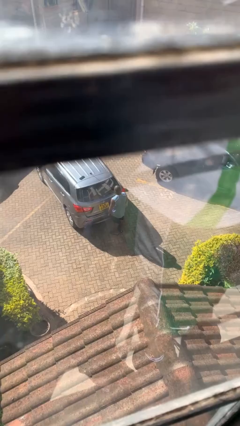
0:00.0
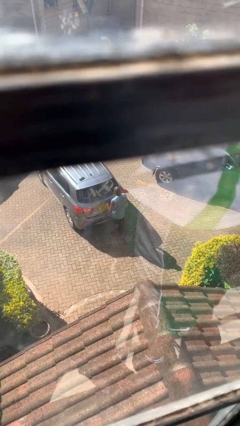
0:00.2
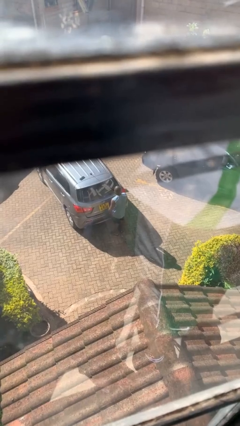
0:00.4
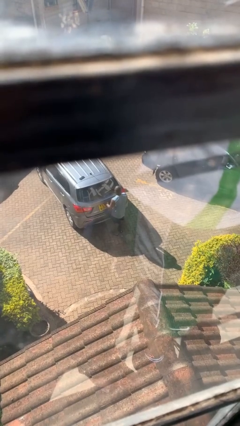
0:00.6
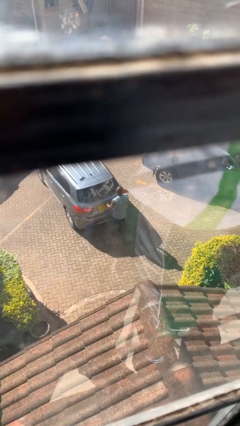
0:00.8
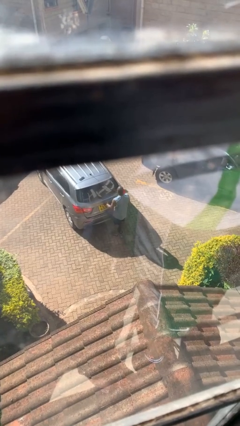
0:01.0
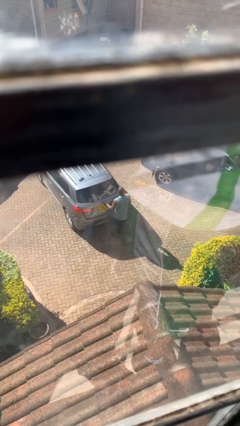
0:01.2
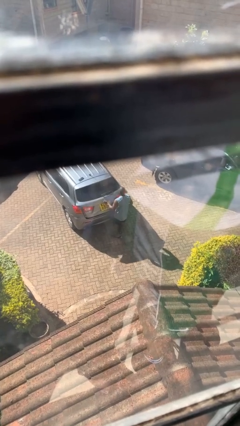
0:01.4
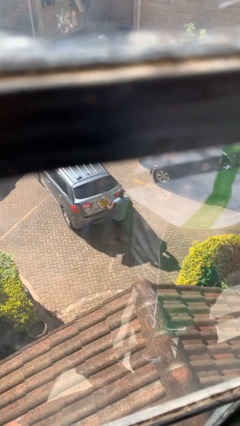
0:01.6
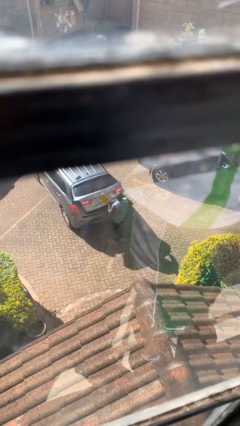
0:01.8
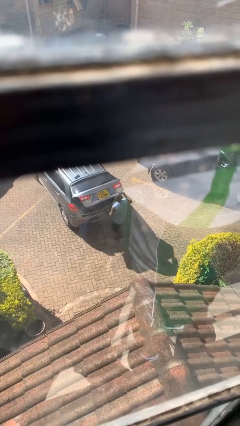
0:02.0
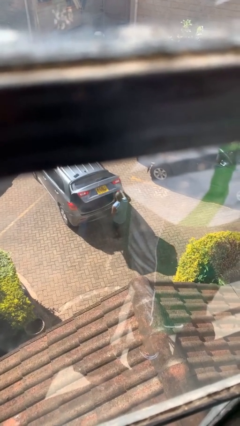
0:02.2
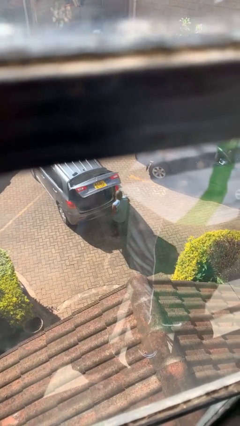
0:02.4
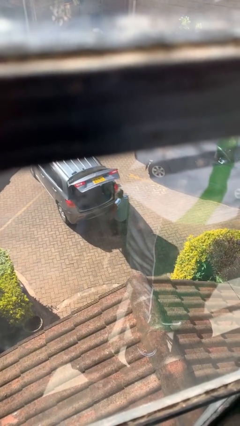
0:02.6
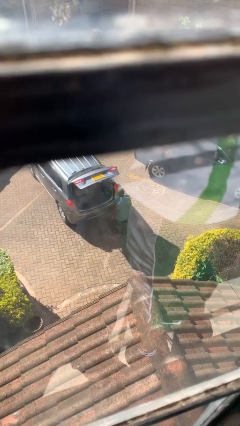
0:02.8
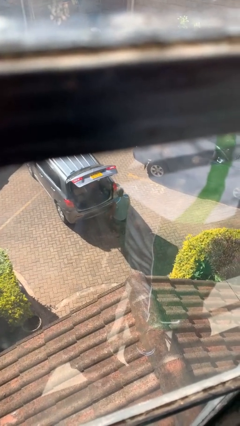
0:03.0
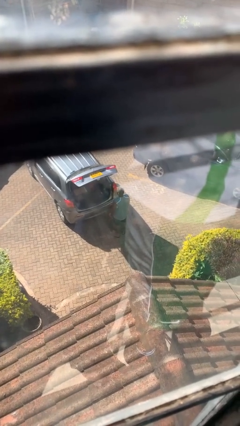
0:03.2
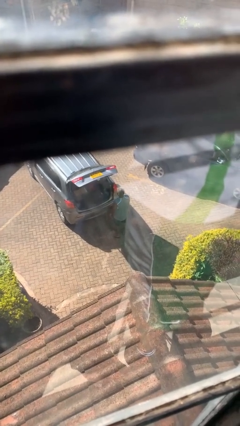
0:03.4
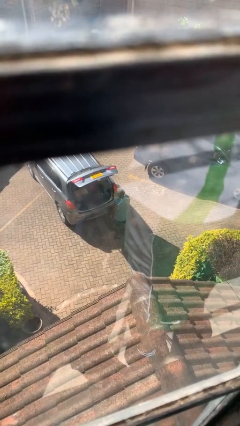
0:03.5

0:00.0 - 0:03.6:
person opens car trunk

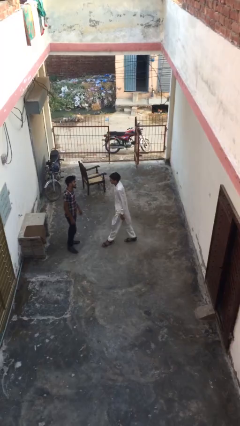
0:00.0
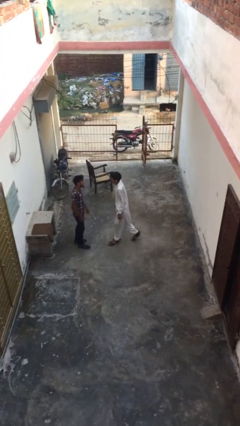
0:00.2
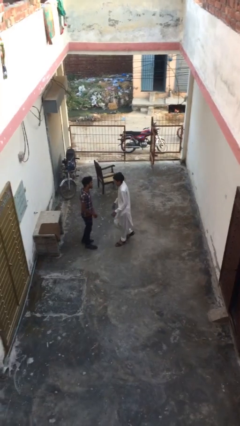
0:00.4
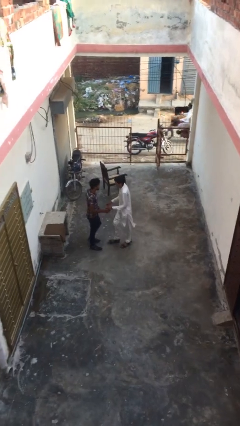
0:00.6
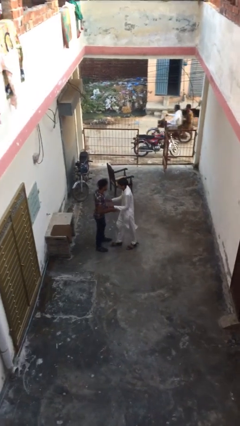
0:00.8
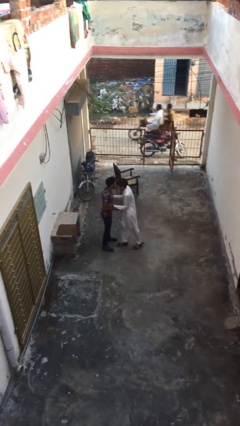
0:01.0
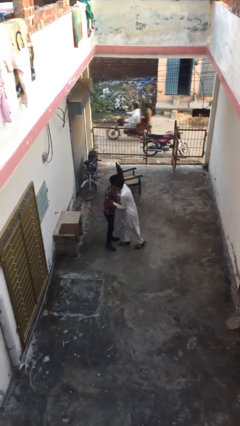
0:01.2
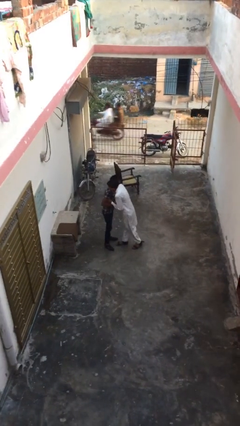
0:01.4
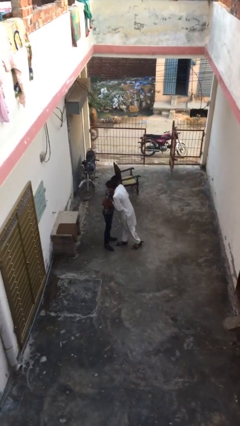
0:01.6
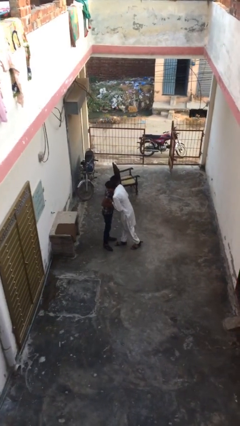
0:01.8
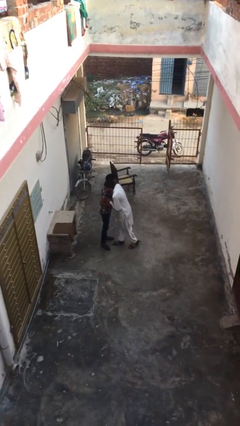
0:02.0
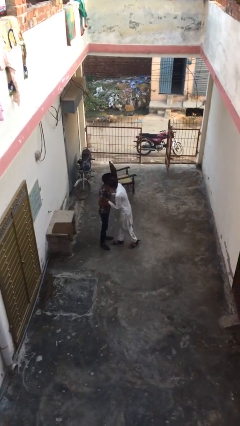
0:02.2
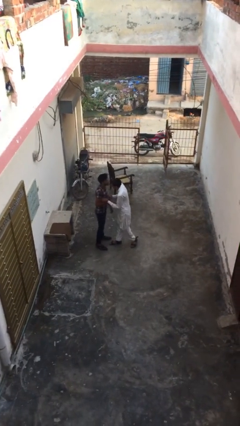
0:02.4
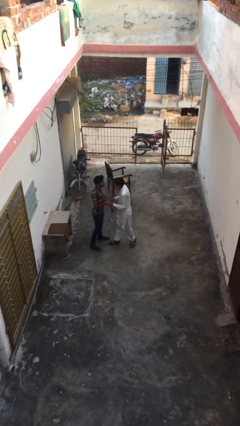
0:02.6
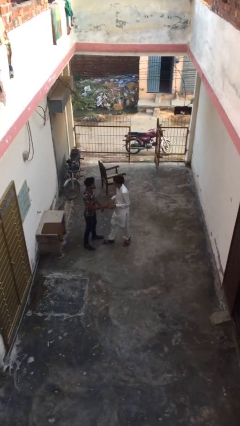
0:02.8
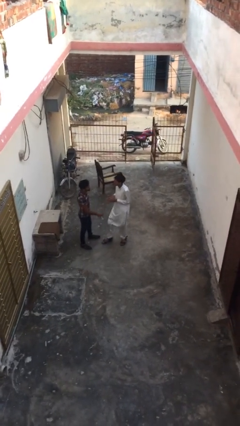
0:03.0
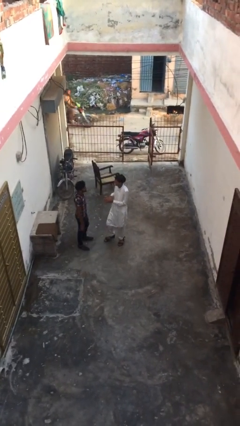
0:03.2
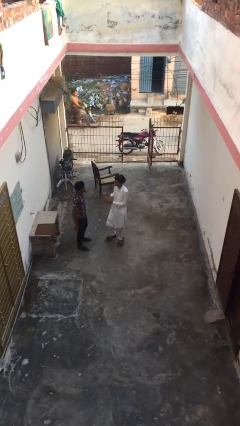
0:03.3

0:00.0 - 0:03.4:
person embraces person

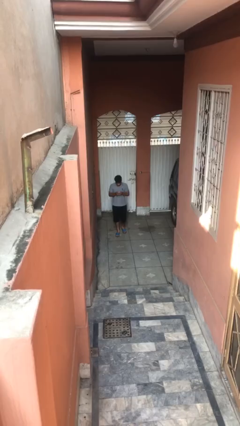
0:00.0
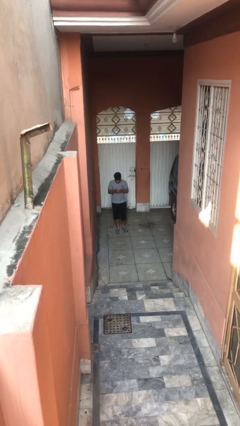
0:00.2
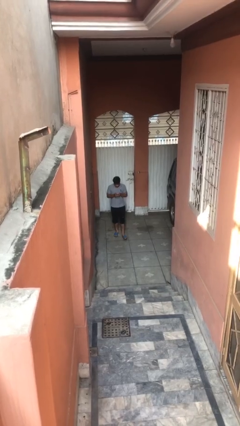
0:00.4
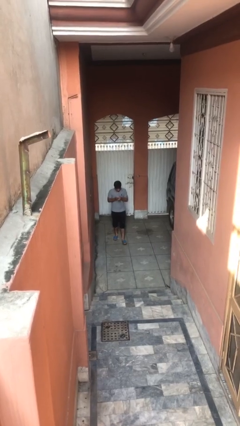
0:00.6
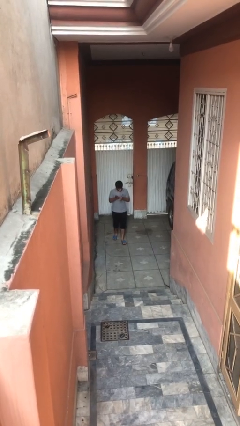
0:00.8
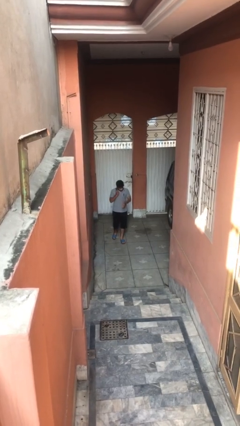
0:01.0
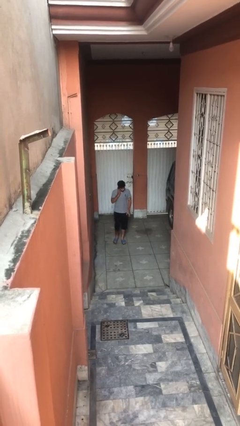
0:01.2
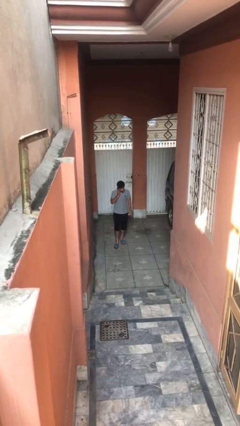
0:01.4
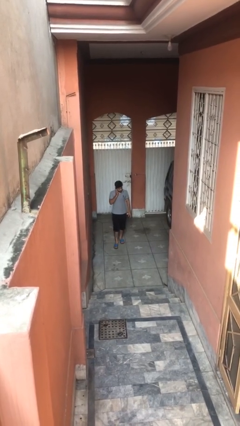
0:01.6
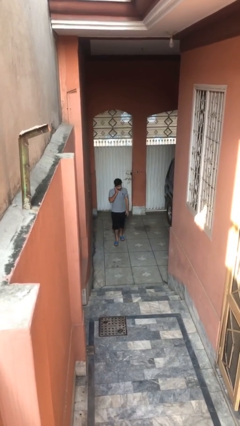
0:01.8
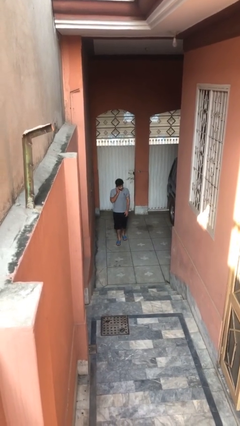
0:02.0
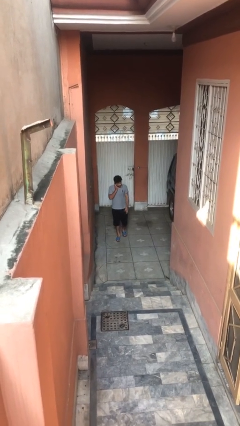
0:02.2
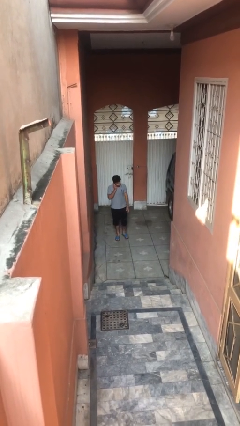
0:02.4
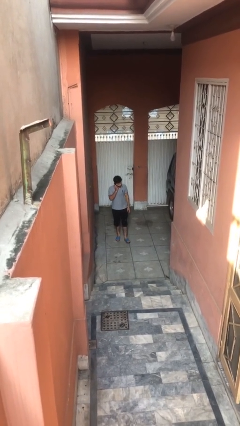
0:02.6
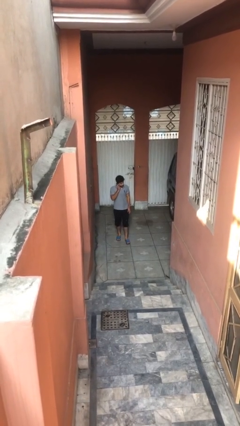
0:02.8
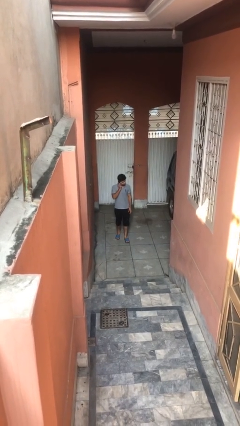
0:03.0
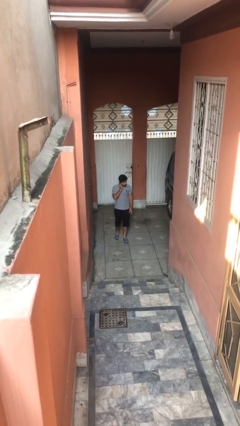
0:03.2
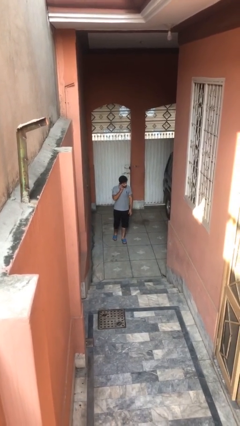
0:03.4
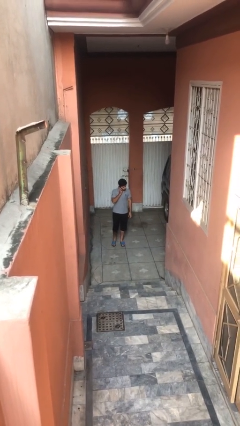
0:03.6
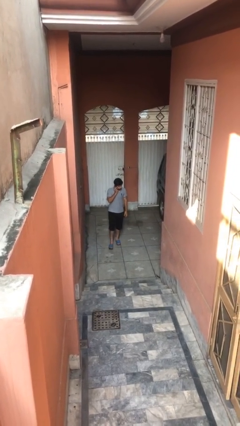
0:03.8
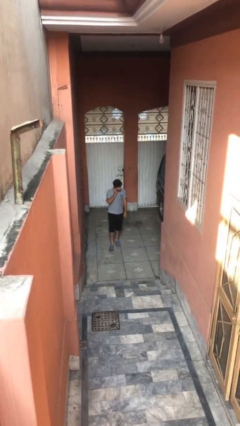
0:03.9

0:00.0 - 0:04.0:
person talks on phone

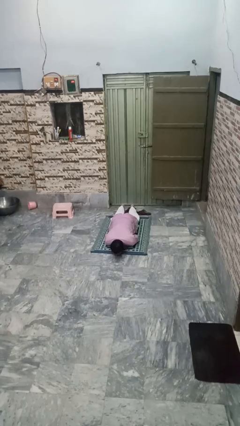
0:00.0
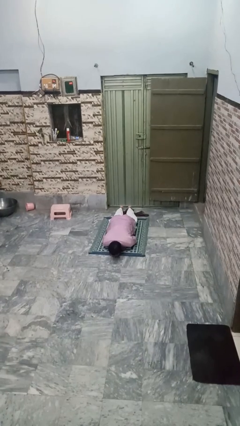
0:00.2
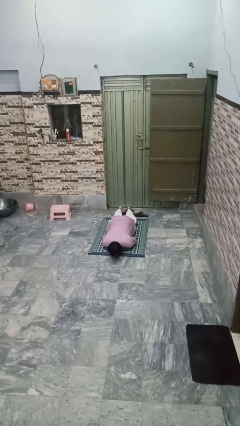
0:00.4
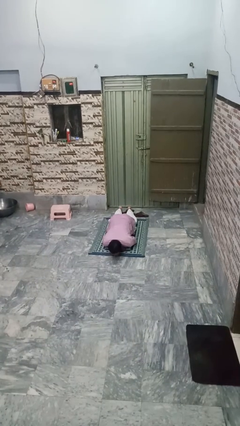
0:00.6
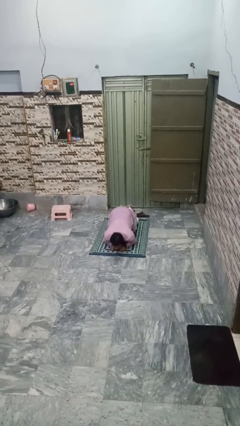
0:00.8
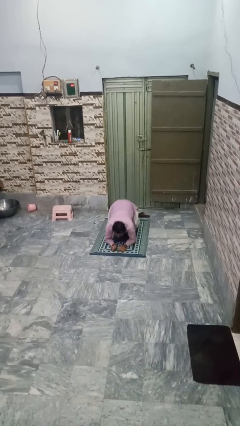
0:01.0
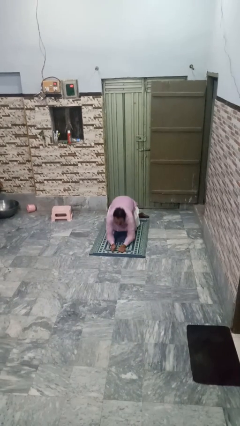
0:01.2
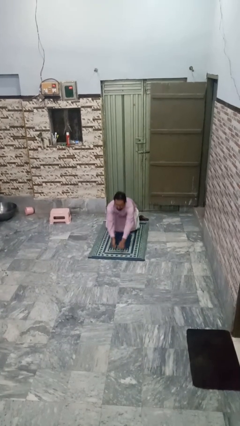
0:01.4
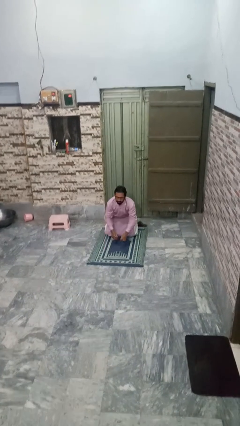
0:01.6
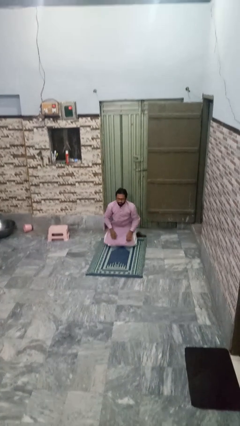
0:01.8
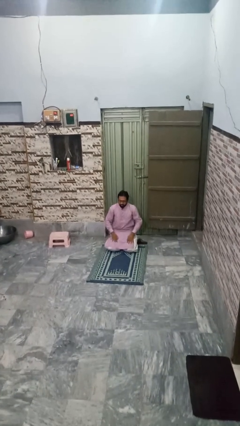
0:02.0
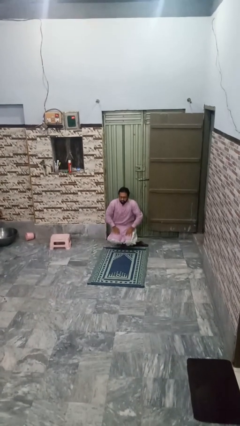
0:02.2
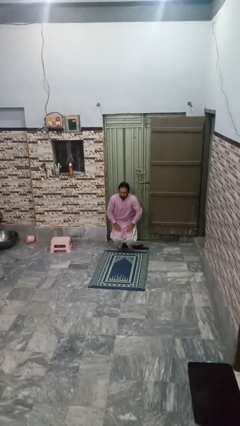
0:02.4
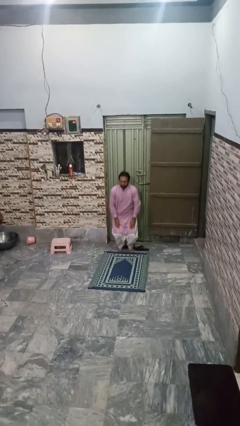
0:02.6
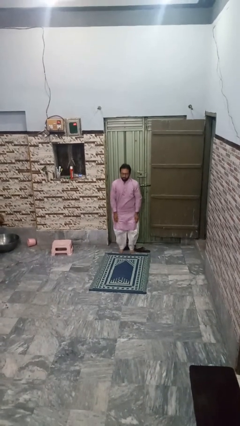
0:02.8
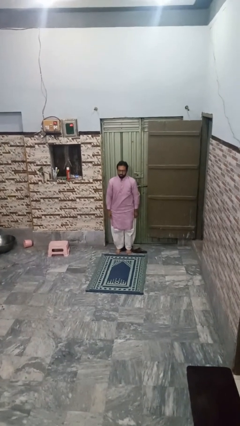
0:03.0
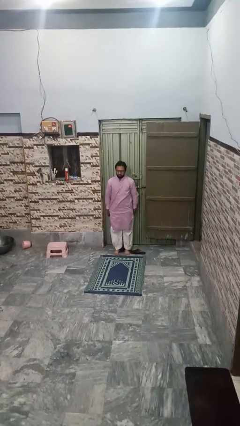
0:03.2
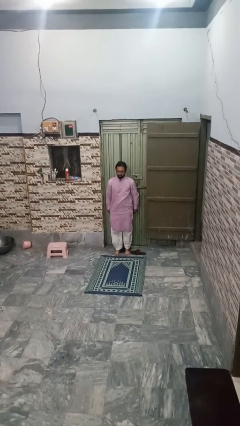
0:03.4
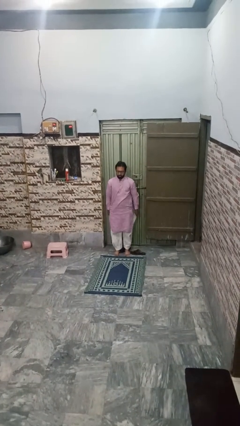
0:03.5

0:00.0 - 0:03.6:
person stands up from floor

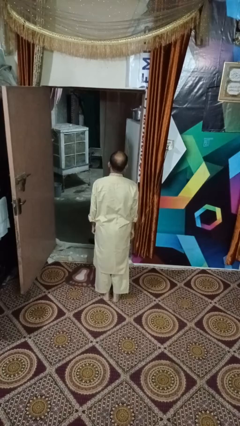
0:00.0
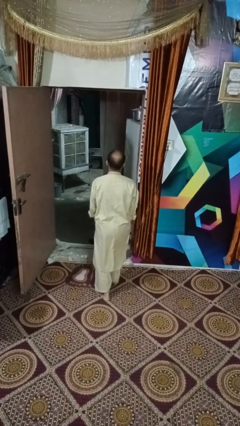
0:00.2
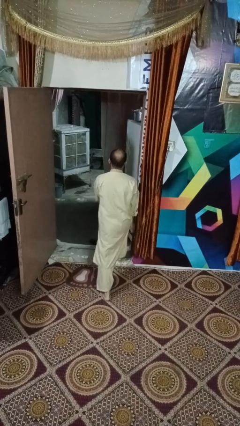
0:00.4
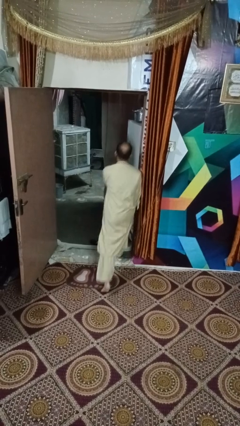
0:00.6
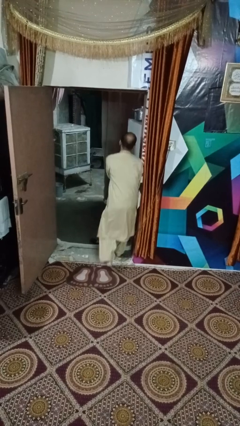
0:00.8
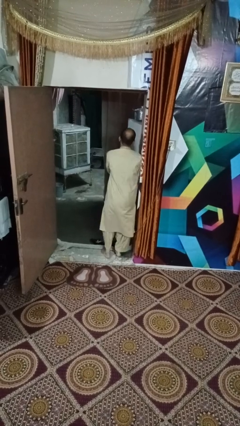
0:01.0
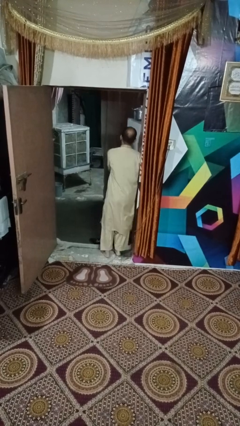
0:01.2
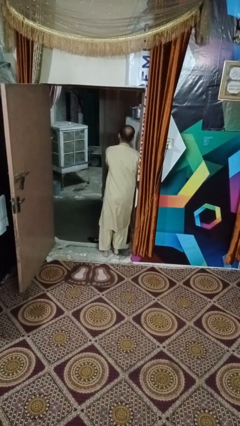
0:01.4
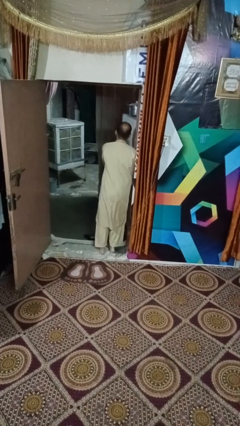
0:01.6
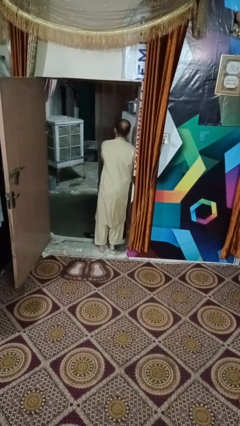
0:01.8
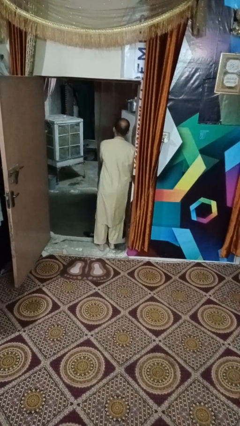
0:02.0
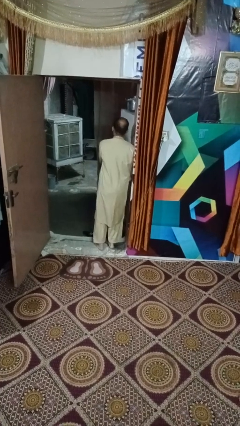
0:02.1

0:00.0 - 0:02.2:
person bumps into wall

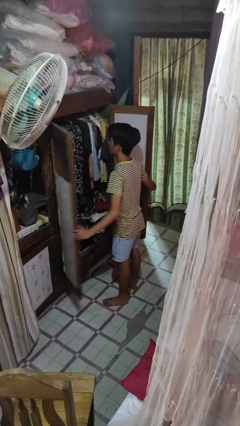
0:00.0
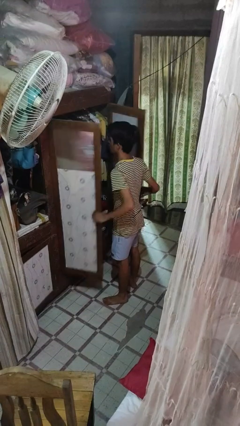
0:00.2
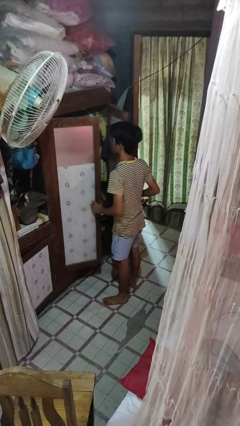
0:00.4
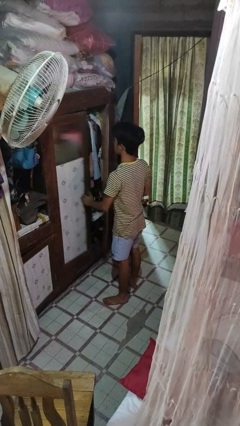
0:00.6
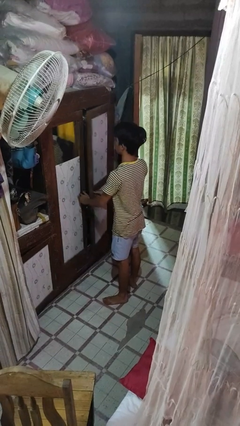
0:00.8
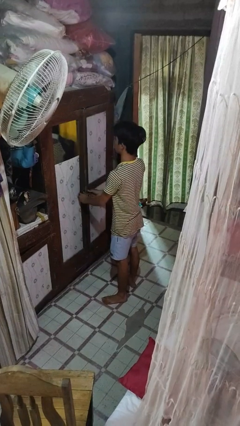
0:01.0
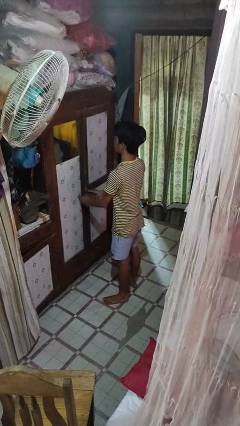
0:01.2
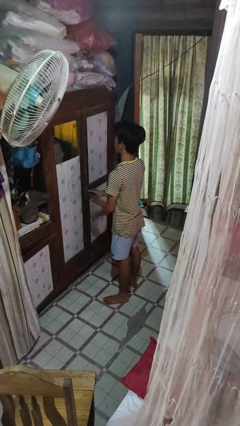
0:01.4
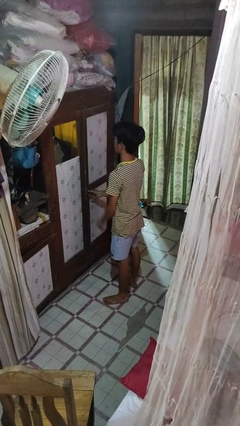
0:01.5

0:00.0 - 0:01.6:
person closes closet door
